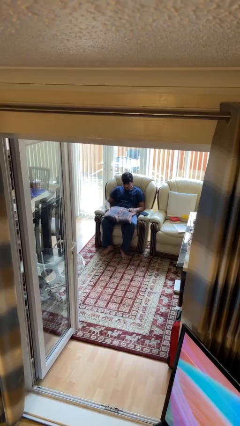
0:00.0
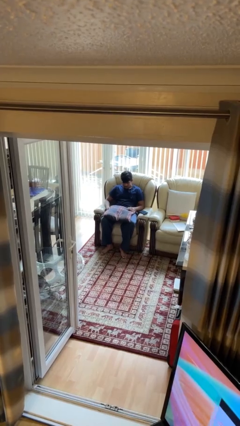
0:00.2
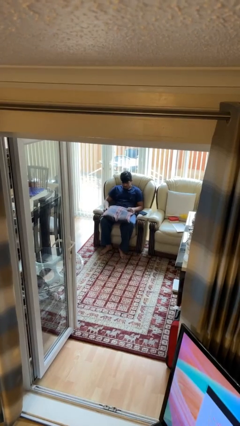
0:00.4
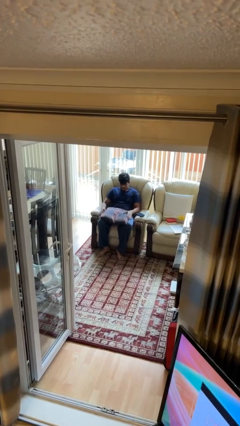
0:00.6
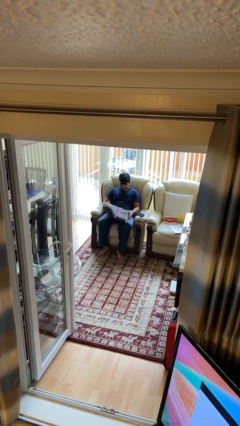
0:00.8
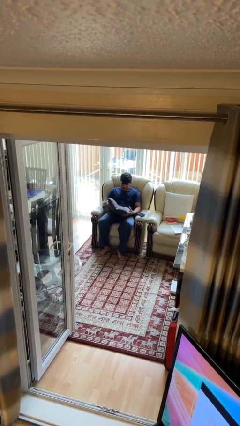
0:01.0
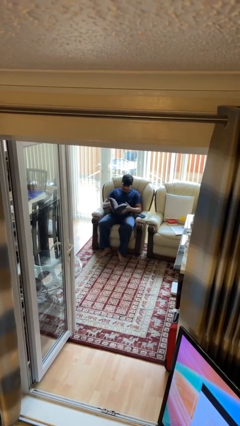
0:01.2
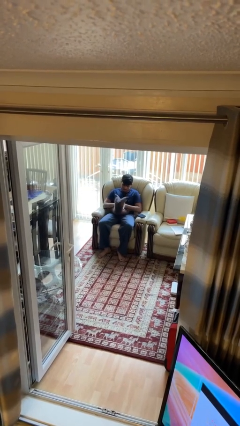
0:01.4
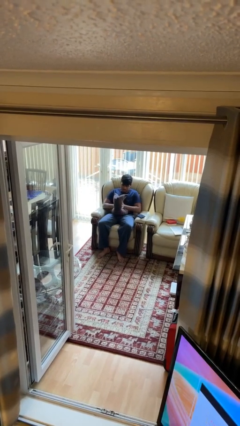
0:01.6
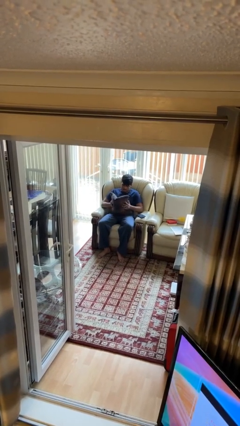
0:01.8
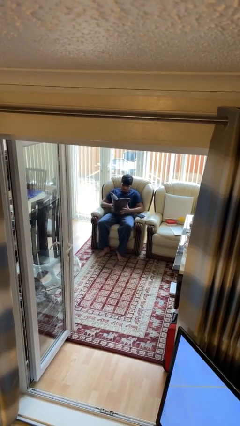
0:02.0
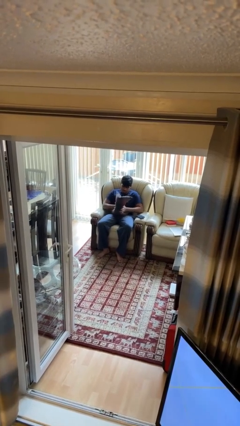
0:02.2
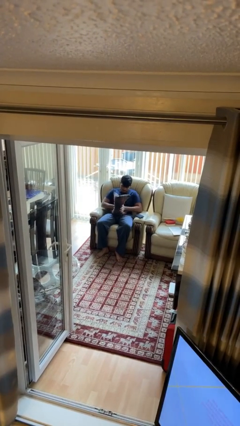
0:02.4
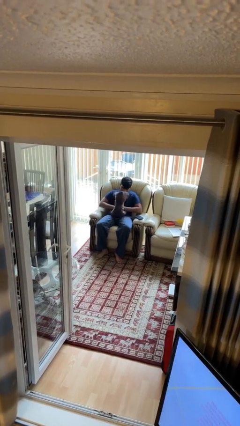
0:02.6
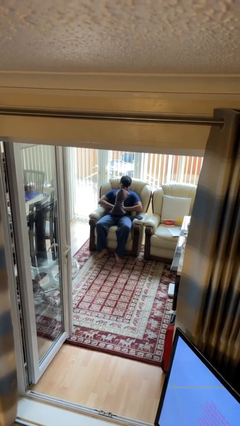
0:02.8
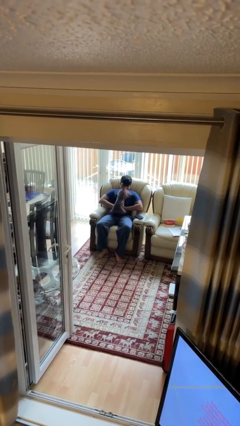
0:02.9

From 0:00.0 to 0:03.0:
person squeezes object

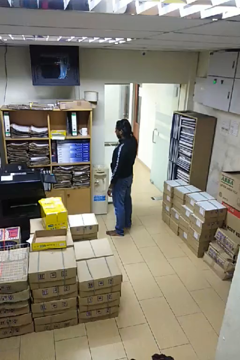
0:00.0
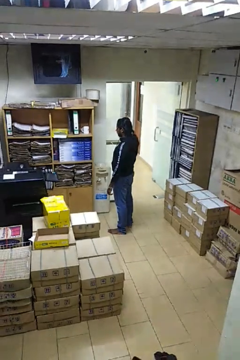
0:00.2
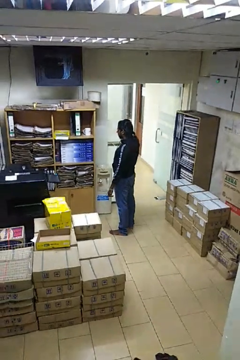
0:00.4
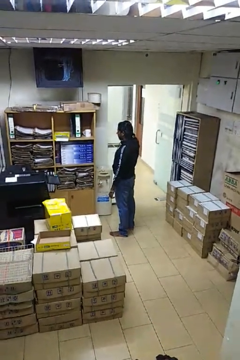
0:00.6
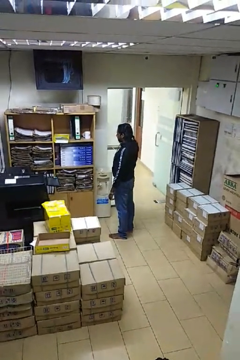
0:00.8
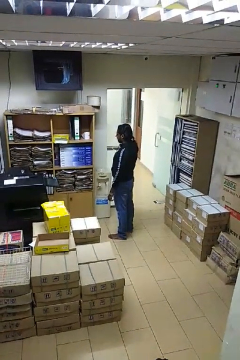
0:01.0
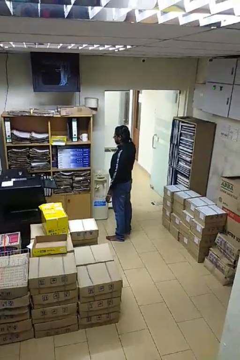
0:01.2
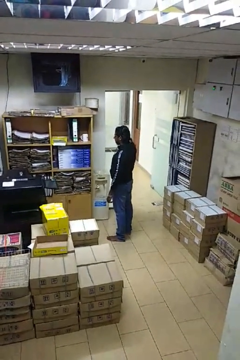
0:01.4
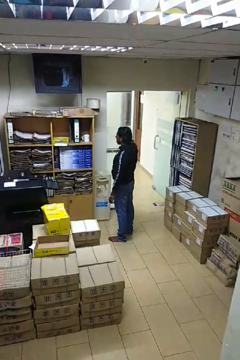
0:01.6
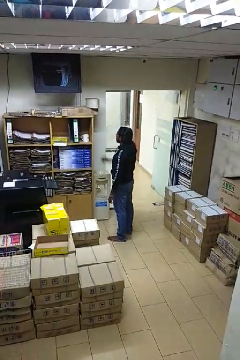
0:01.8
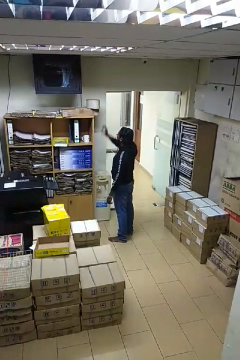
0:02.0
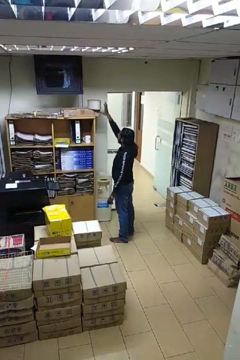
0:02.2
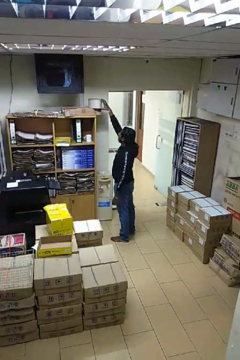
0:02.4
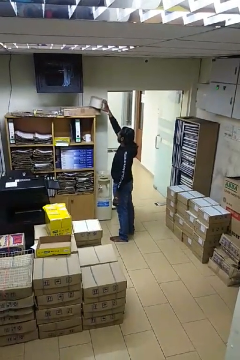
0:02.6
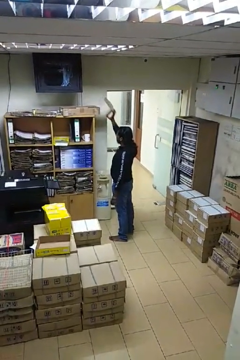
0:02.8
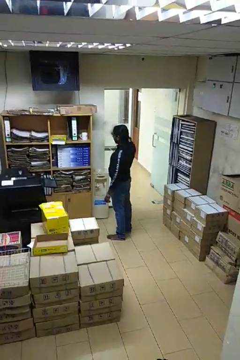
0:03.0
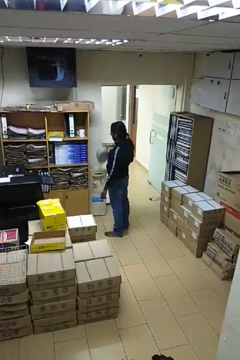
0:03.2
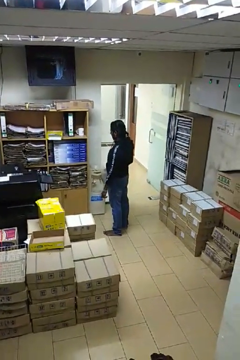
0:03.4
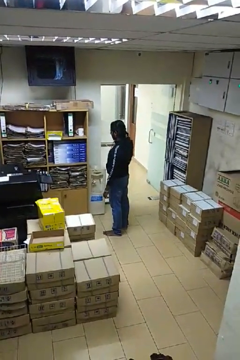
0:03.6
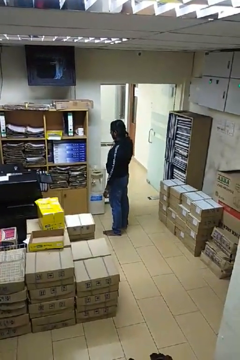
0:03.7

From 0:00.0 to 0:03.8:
person picks up object from shelf

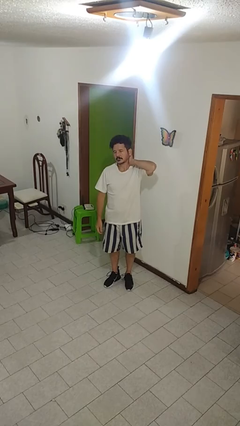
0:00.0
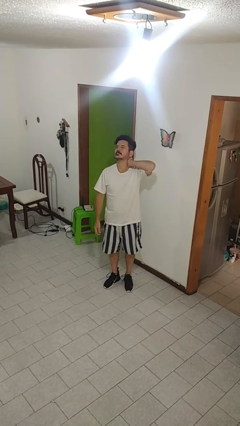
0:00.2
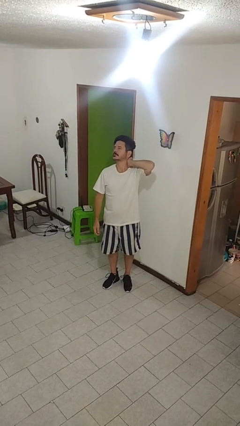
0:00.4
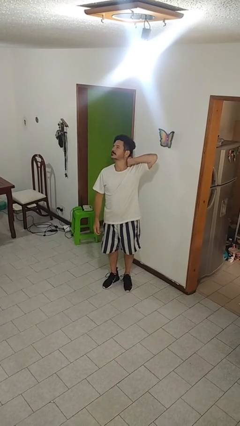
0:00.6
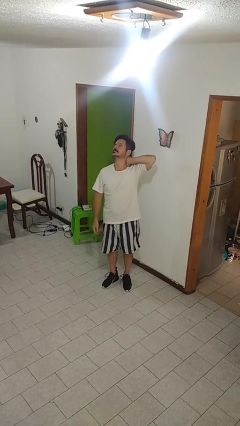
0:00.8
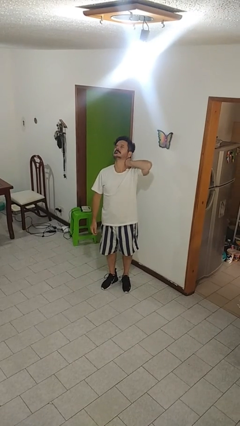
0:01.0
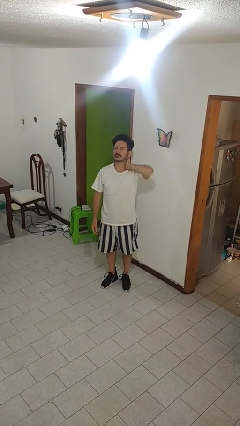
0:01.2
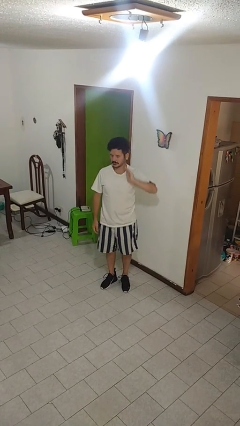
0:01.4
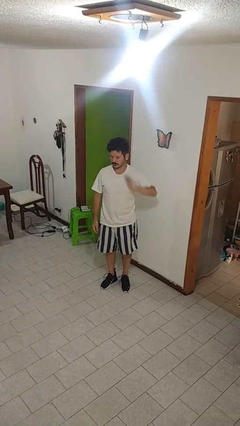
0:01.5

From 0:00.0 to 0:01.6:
person rubs neck

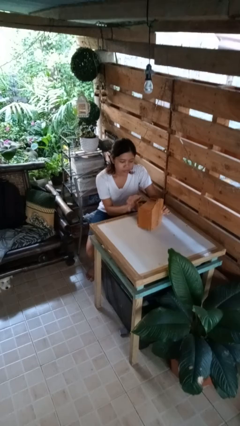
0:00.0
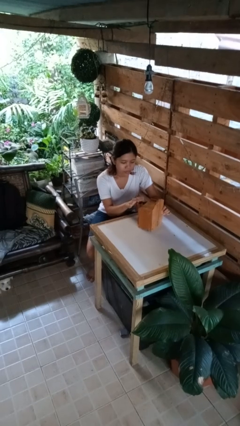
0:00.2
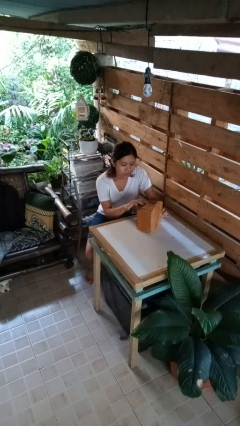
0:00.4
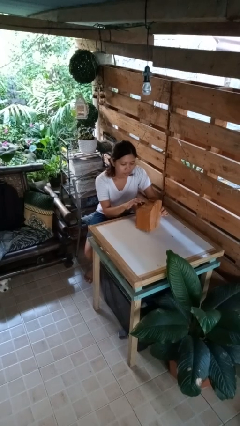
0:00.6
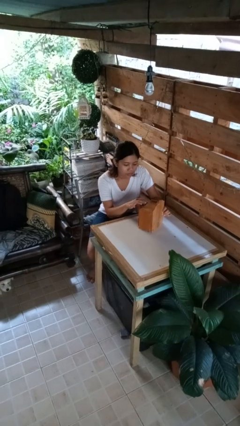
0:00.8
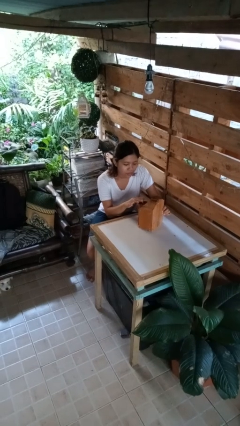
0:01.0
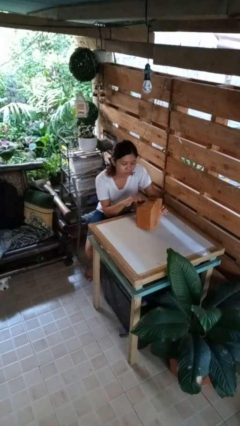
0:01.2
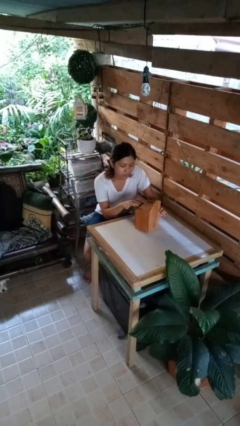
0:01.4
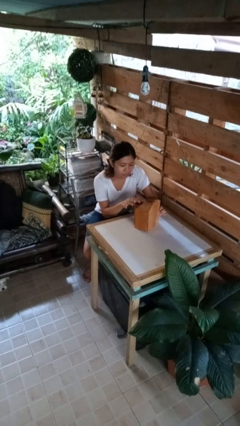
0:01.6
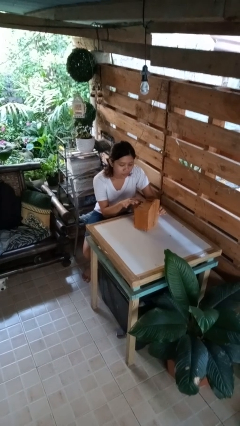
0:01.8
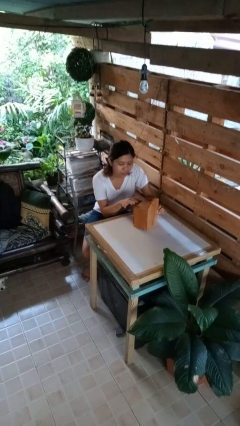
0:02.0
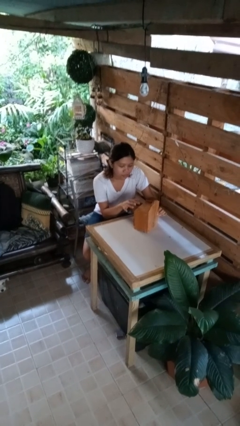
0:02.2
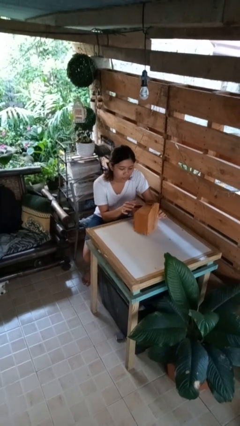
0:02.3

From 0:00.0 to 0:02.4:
person searches jewelry box

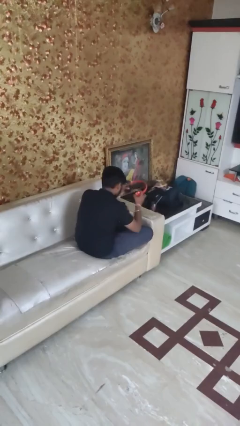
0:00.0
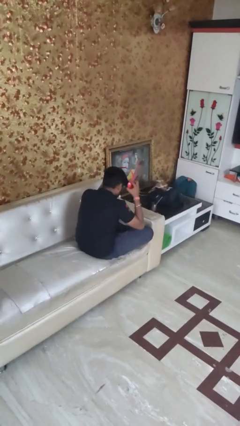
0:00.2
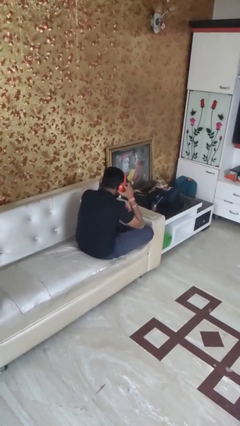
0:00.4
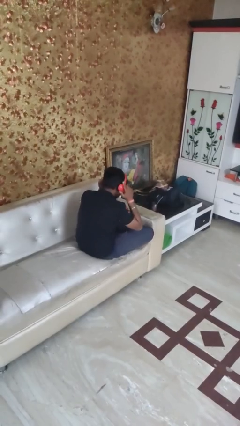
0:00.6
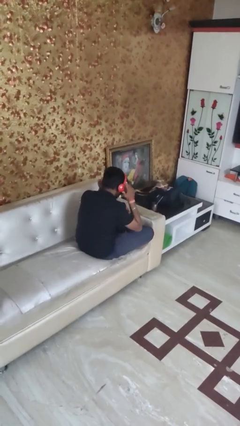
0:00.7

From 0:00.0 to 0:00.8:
person puts on headphones

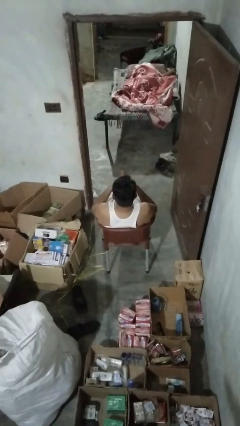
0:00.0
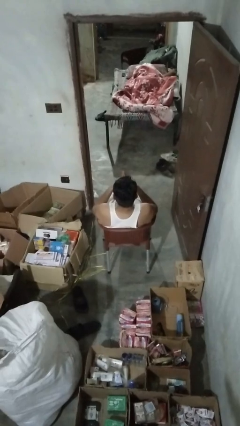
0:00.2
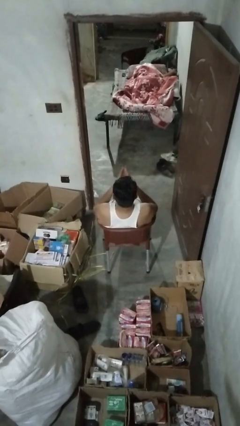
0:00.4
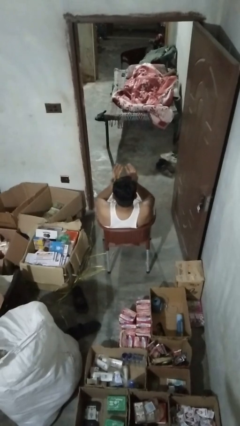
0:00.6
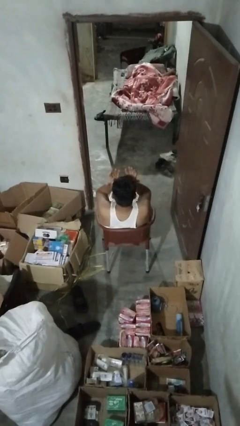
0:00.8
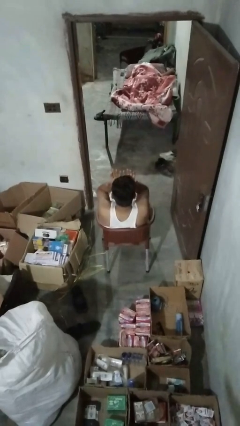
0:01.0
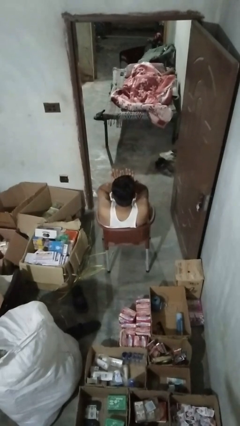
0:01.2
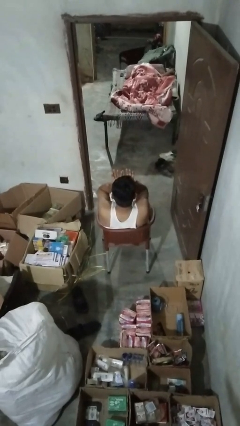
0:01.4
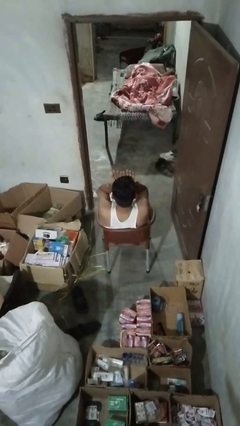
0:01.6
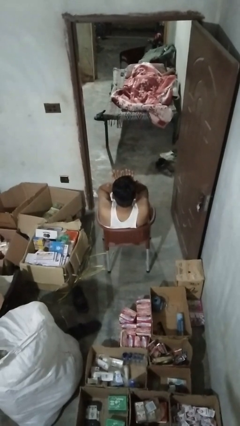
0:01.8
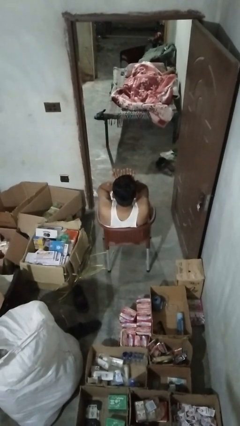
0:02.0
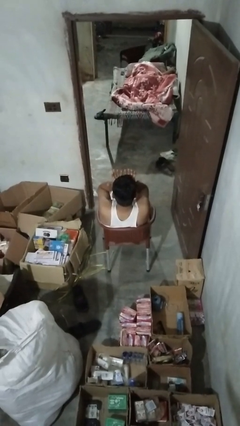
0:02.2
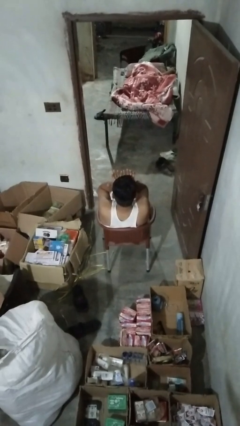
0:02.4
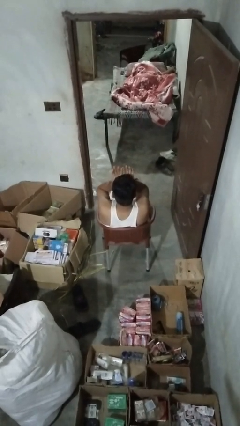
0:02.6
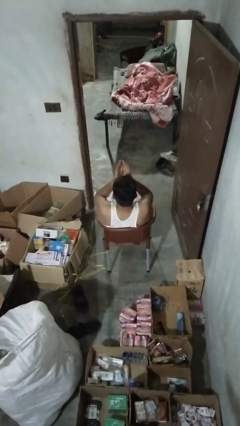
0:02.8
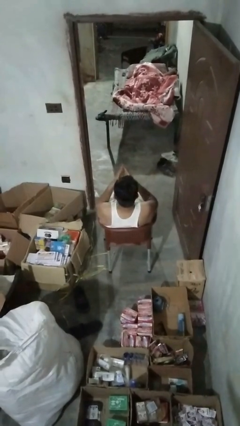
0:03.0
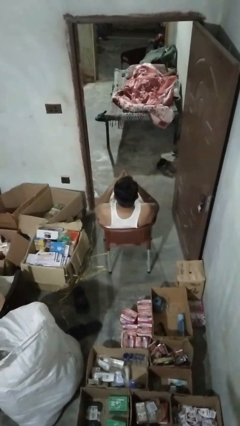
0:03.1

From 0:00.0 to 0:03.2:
person rubs eyes

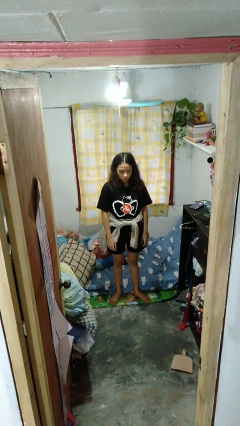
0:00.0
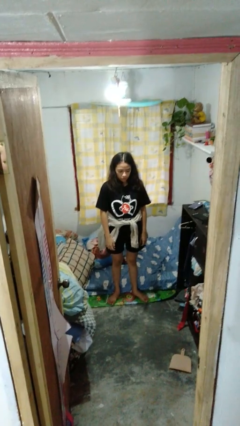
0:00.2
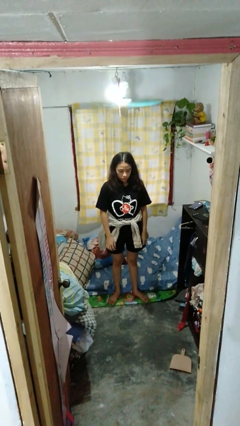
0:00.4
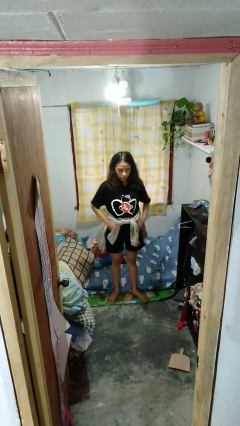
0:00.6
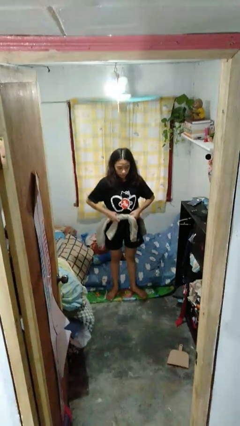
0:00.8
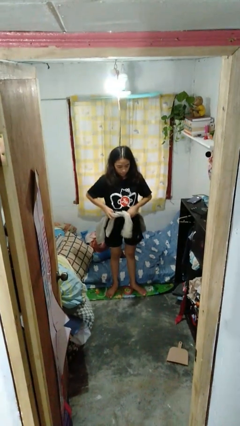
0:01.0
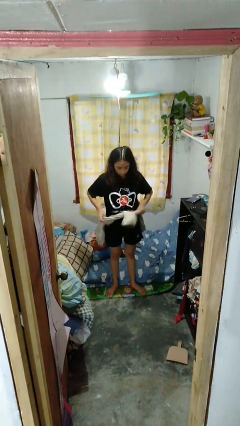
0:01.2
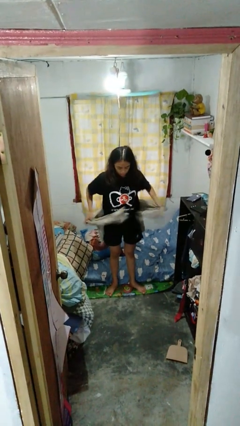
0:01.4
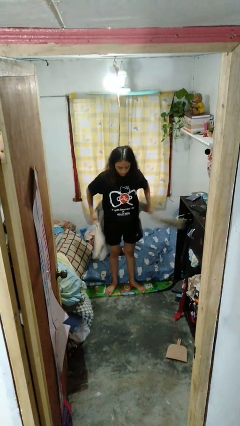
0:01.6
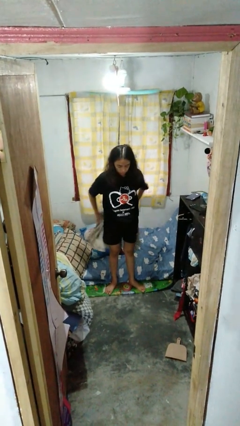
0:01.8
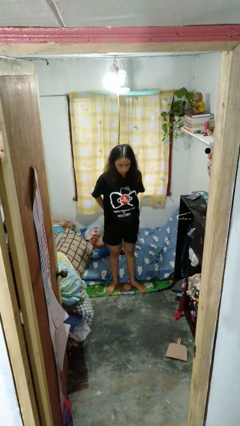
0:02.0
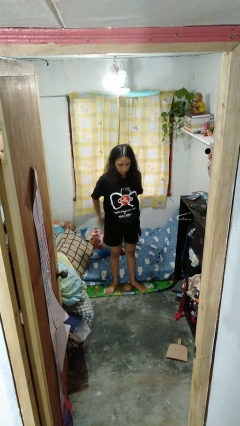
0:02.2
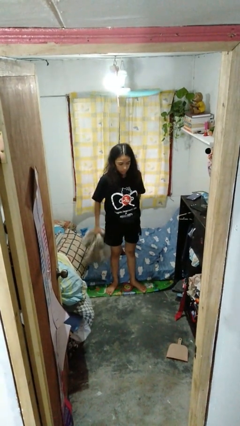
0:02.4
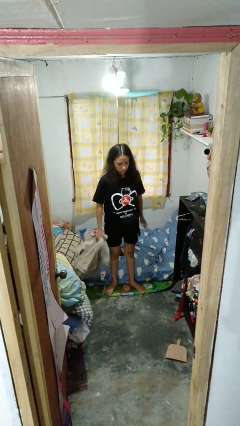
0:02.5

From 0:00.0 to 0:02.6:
person unties jacket around waist

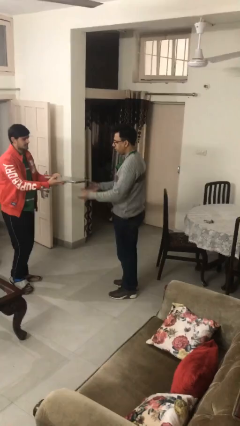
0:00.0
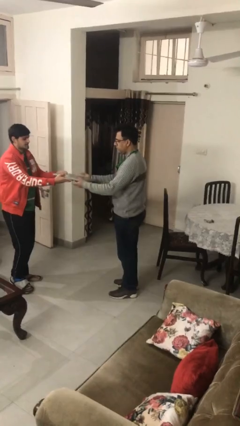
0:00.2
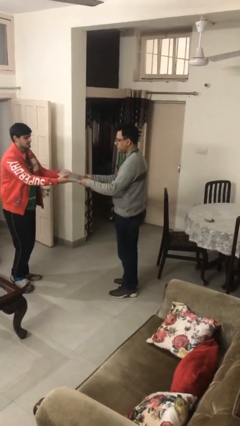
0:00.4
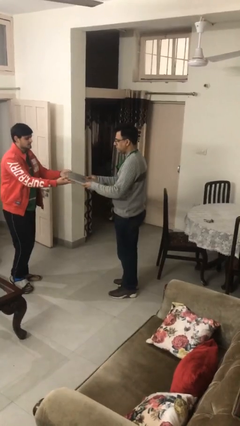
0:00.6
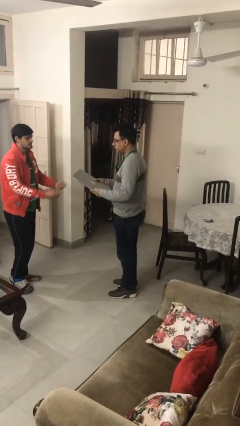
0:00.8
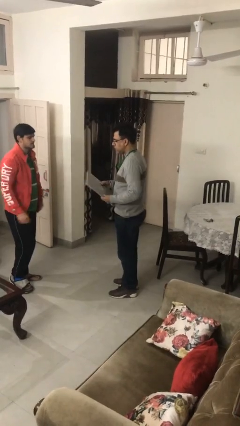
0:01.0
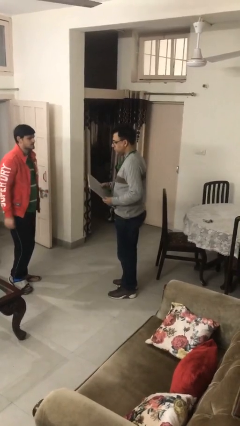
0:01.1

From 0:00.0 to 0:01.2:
person transfers object to person
